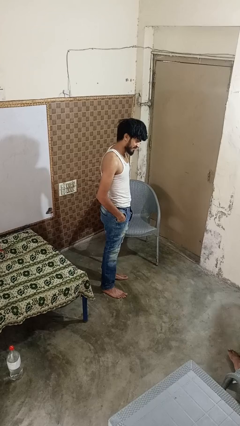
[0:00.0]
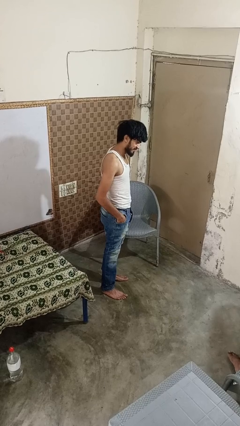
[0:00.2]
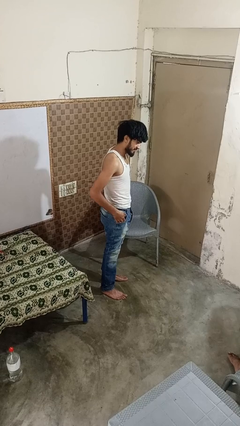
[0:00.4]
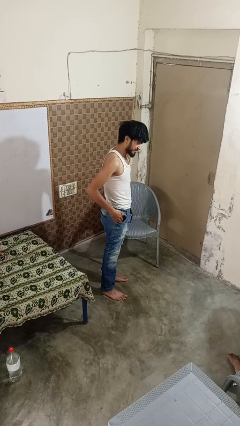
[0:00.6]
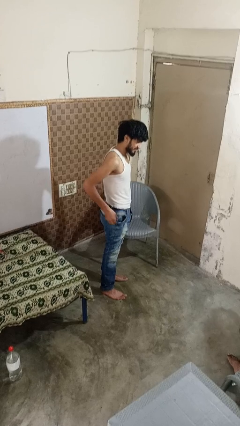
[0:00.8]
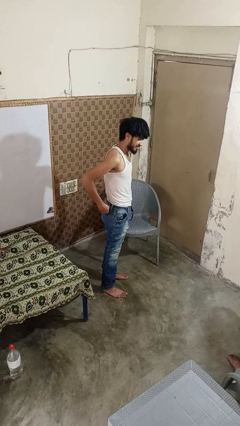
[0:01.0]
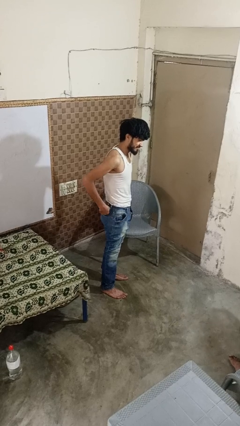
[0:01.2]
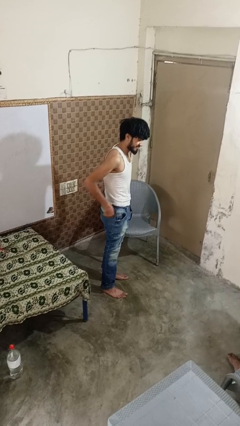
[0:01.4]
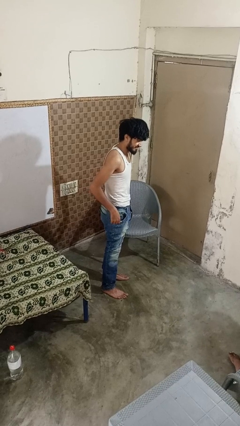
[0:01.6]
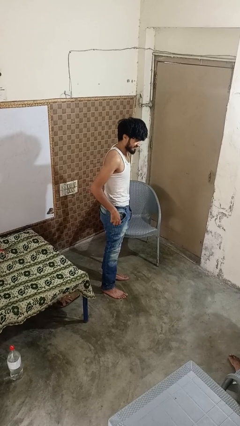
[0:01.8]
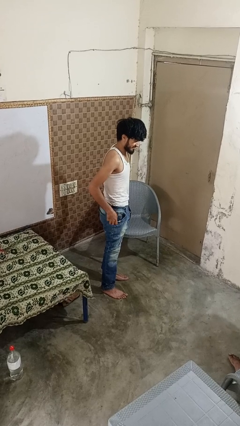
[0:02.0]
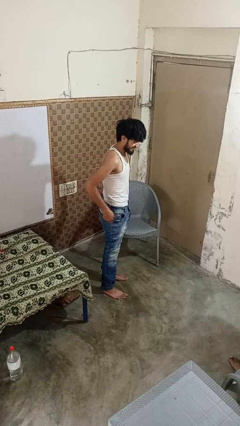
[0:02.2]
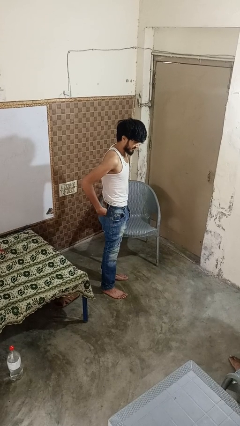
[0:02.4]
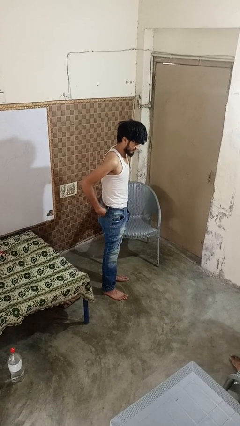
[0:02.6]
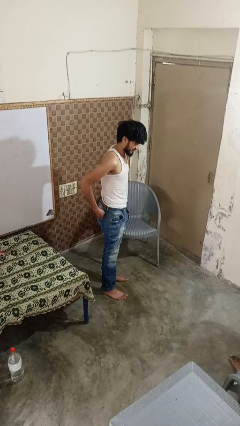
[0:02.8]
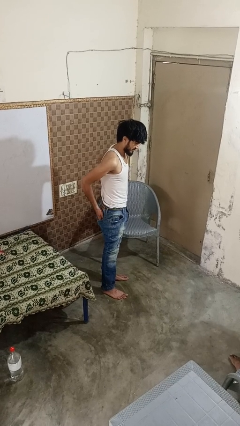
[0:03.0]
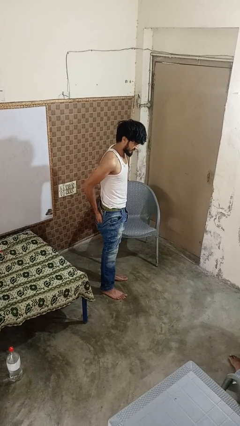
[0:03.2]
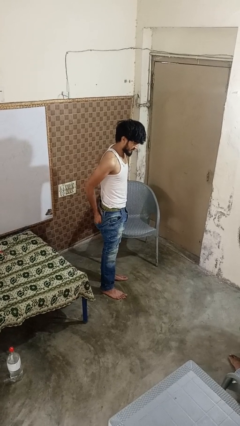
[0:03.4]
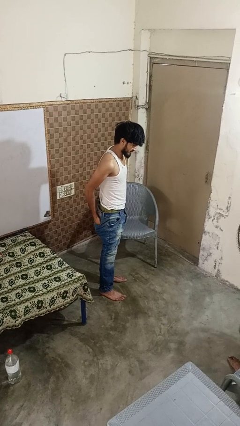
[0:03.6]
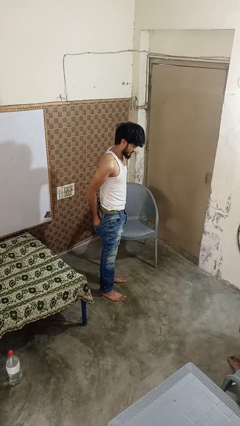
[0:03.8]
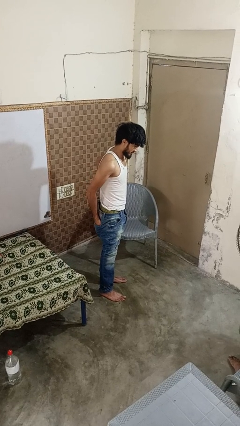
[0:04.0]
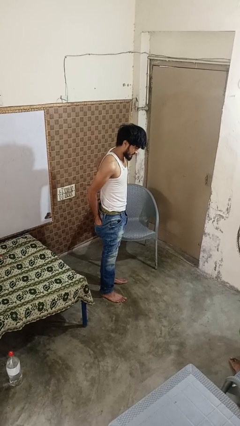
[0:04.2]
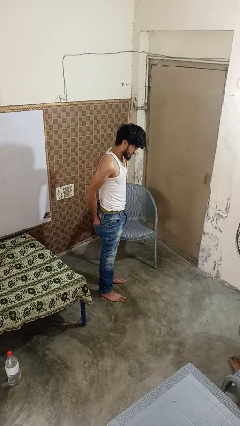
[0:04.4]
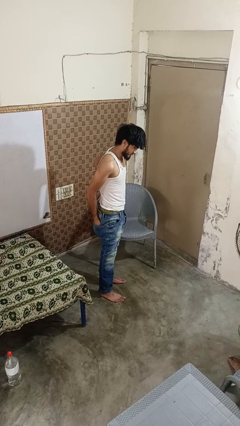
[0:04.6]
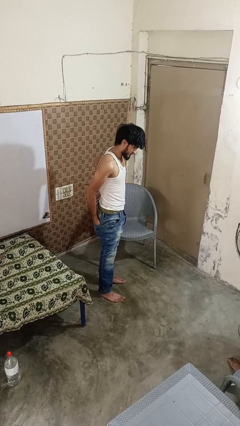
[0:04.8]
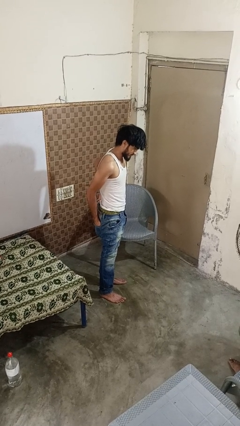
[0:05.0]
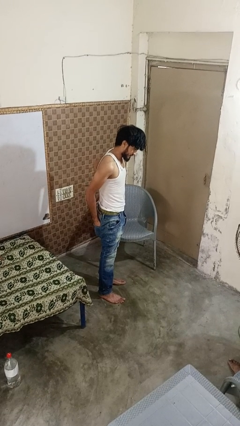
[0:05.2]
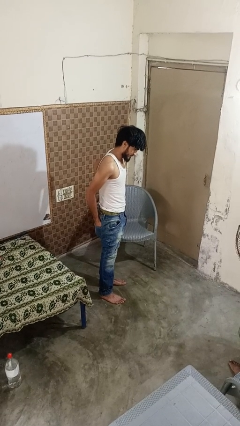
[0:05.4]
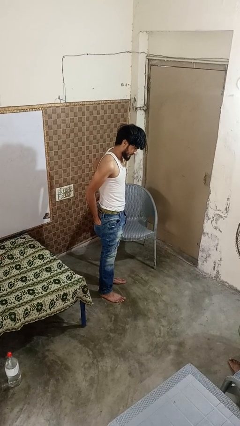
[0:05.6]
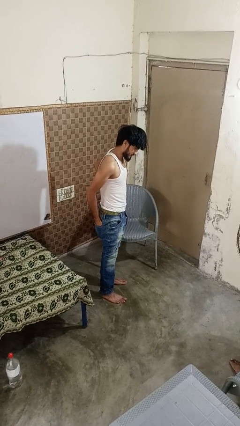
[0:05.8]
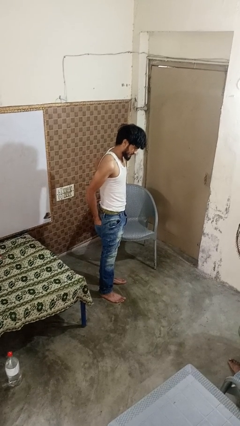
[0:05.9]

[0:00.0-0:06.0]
person puts hands in back pockets

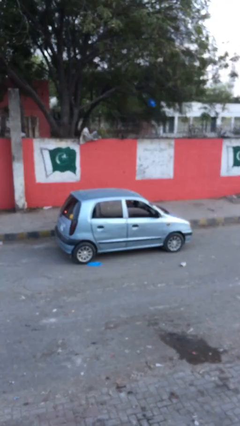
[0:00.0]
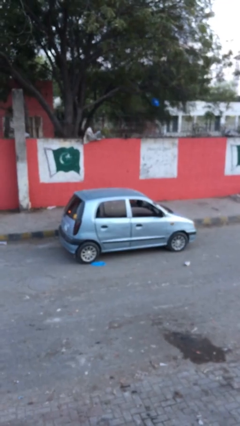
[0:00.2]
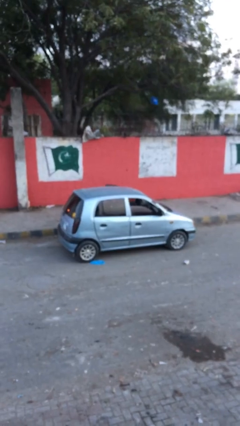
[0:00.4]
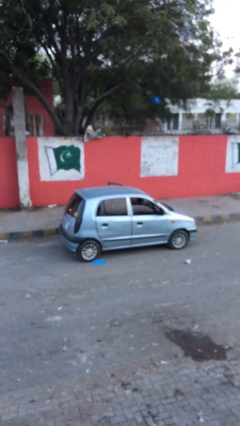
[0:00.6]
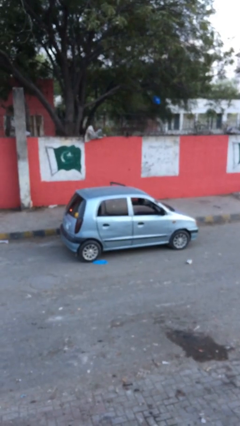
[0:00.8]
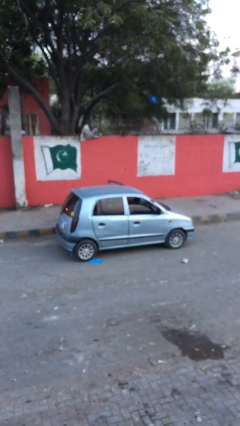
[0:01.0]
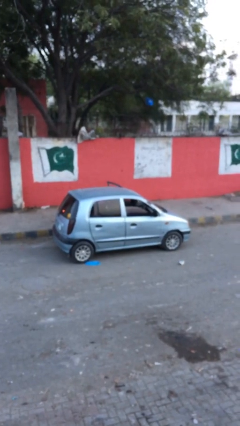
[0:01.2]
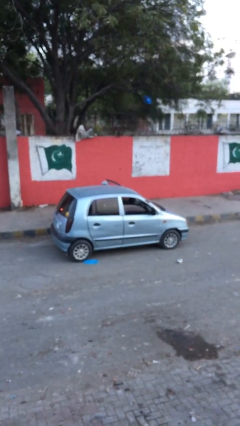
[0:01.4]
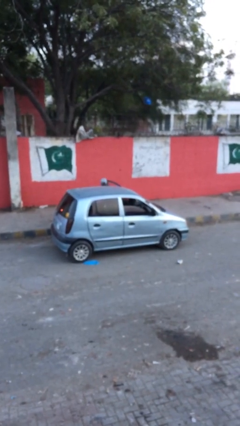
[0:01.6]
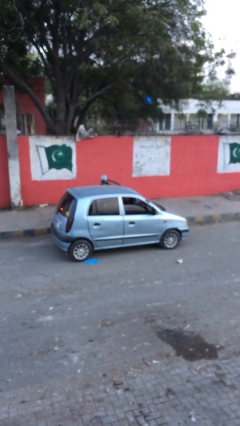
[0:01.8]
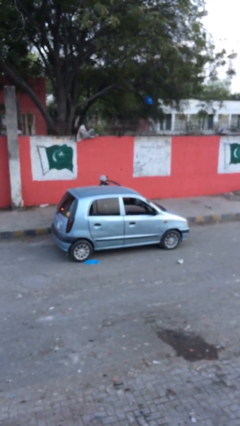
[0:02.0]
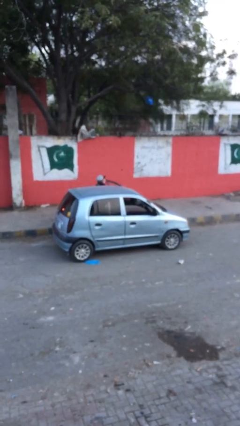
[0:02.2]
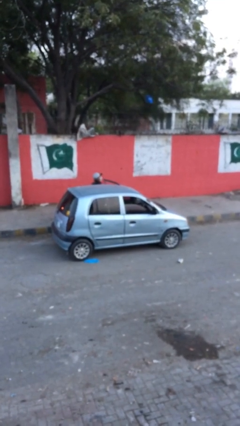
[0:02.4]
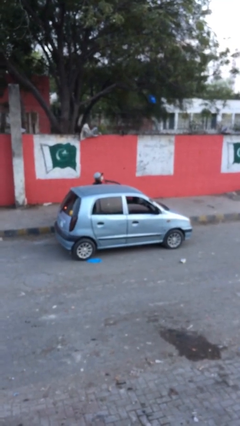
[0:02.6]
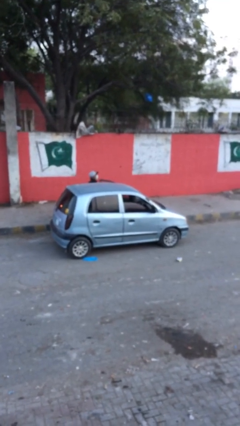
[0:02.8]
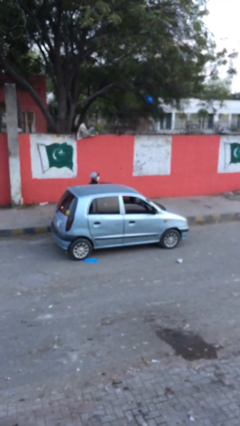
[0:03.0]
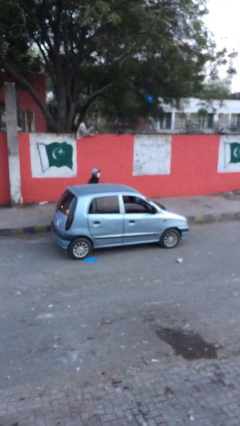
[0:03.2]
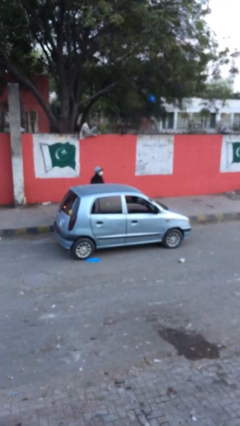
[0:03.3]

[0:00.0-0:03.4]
car drops off person

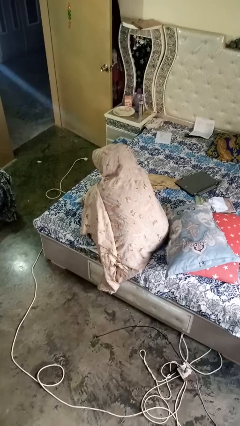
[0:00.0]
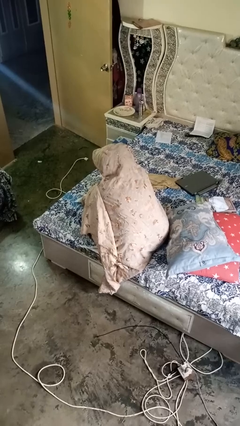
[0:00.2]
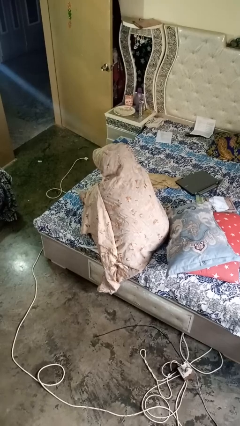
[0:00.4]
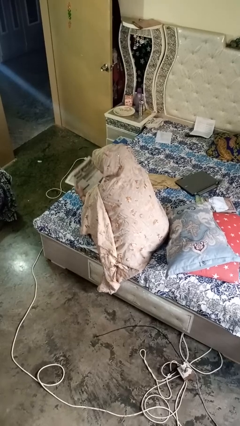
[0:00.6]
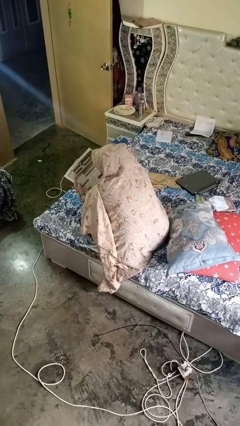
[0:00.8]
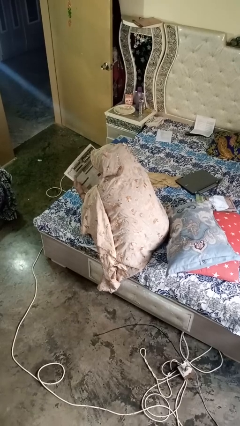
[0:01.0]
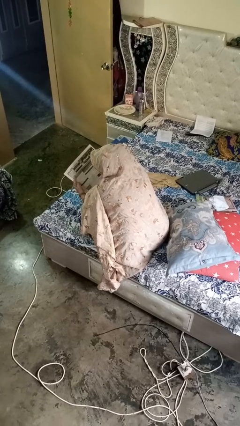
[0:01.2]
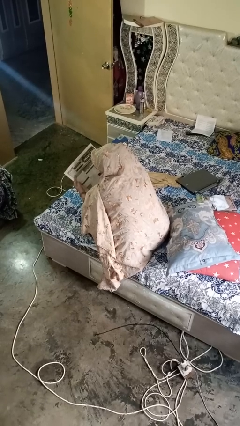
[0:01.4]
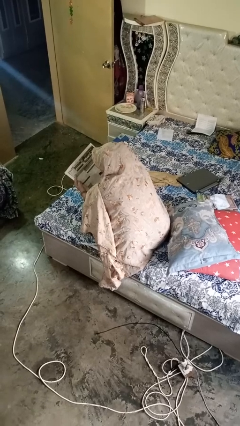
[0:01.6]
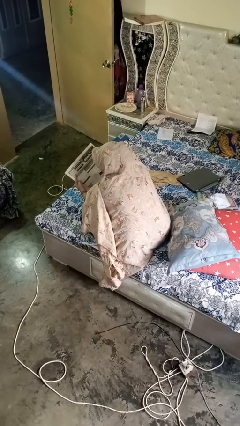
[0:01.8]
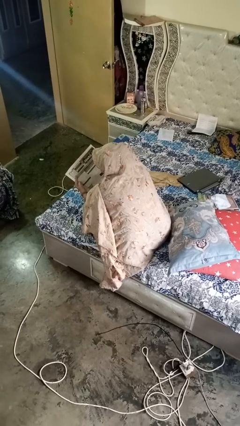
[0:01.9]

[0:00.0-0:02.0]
person reads newspaper

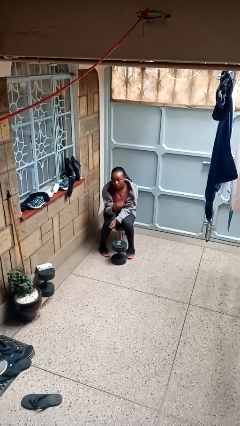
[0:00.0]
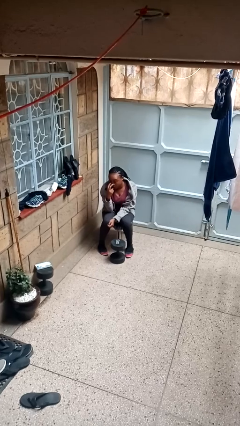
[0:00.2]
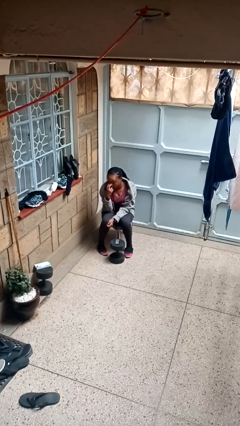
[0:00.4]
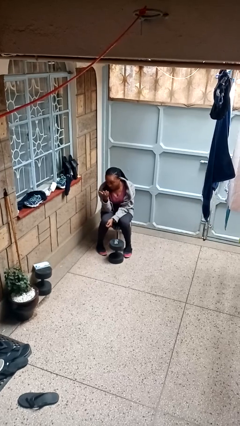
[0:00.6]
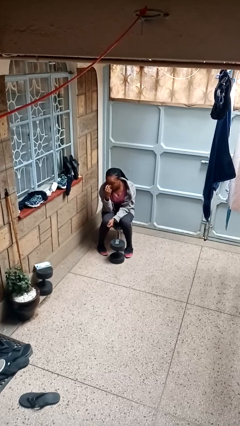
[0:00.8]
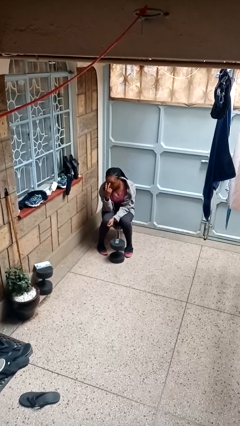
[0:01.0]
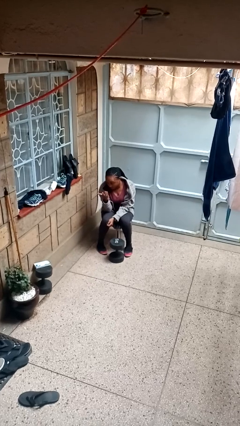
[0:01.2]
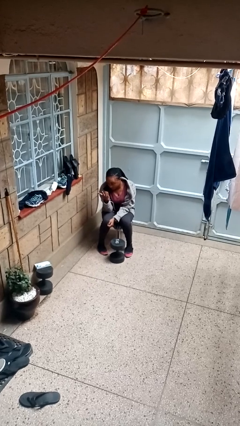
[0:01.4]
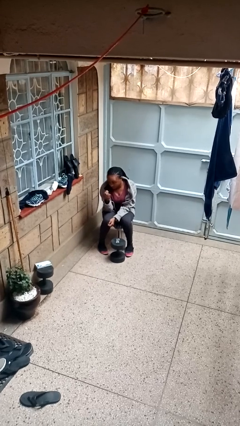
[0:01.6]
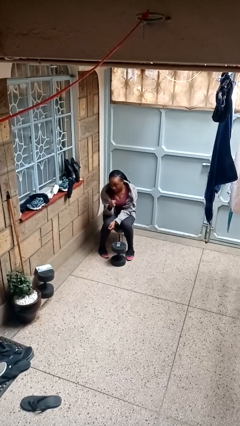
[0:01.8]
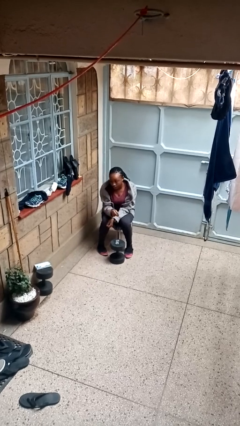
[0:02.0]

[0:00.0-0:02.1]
person gestures watch closely

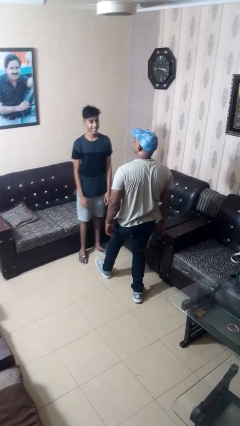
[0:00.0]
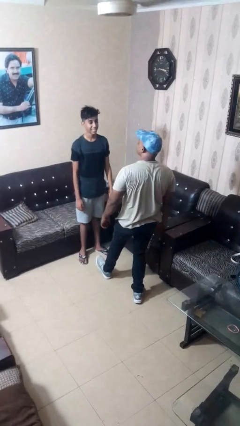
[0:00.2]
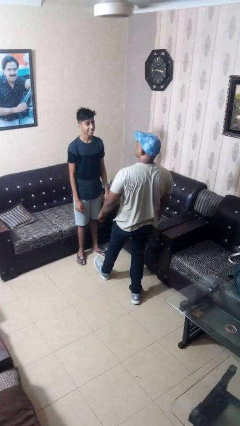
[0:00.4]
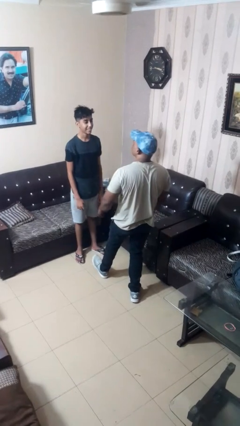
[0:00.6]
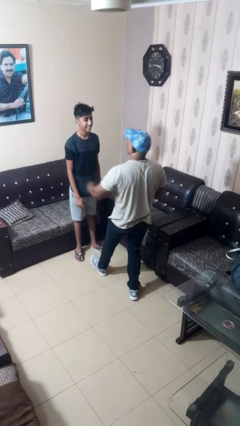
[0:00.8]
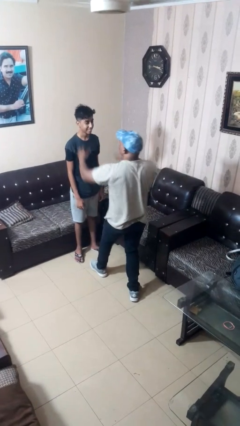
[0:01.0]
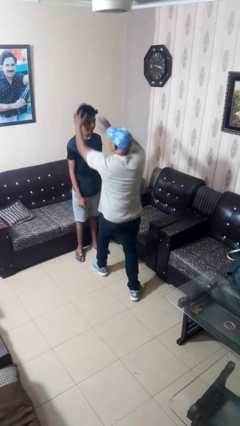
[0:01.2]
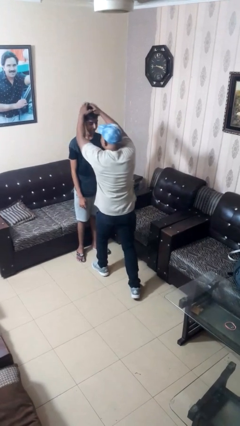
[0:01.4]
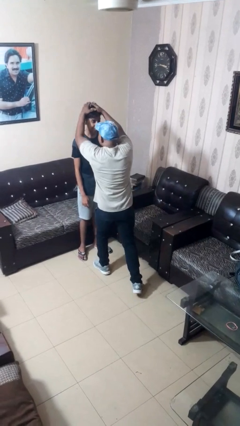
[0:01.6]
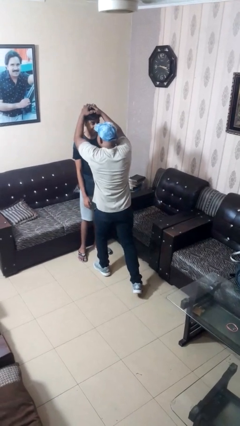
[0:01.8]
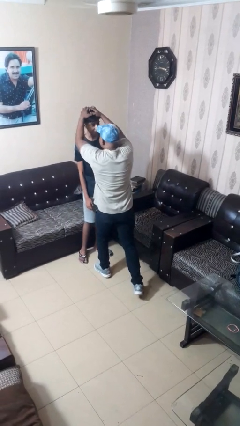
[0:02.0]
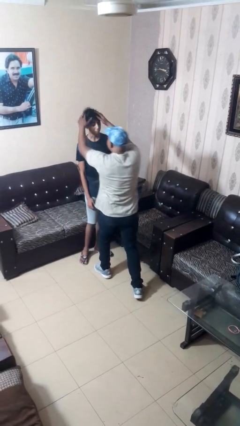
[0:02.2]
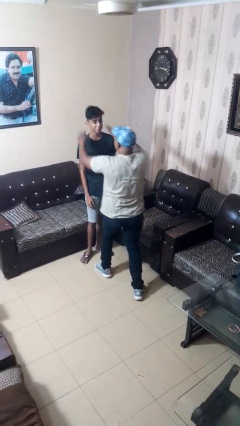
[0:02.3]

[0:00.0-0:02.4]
person grabs person by hair

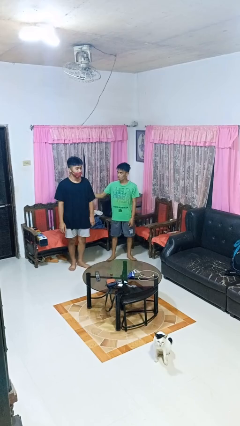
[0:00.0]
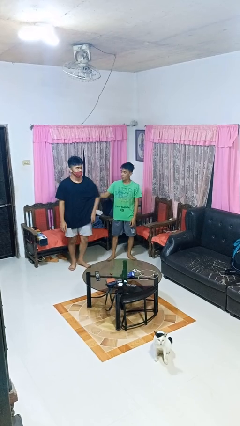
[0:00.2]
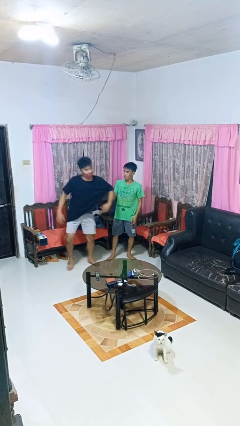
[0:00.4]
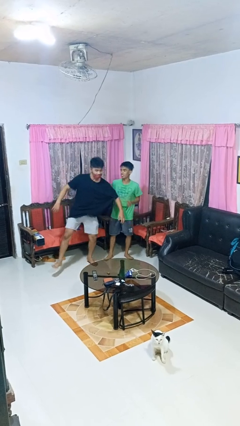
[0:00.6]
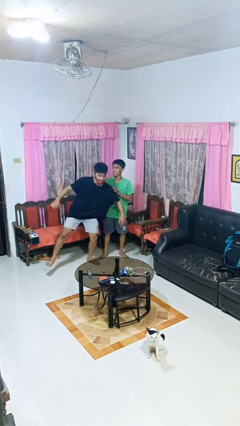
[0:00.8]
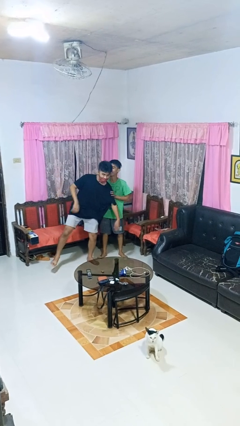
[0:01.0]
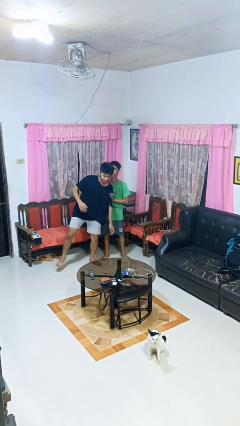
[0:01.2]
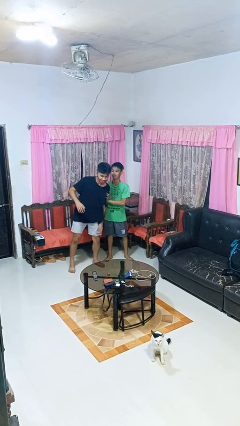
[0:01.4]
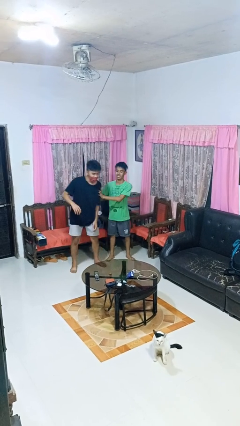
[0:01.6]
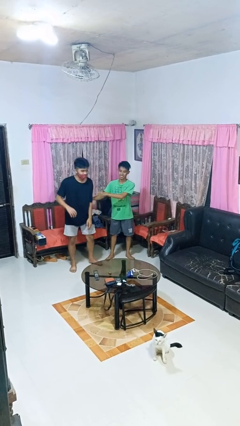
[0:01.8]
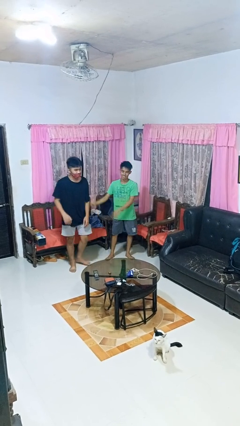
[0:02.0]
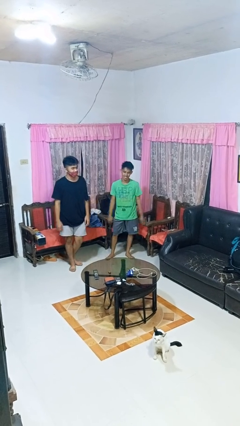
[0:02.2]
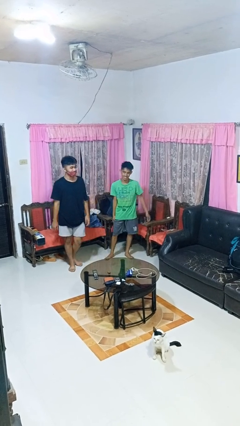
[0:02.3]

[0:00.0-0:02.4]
person grabs person by bicep
